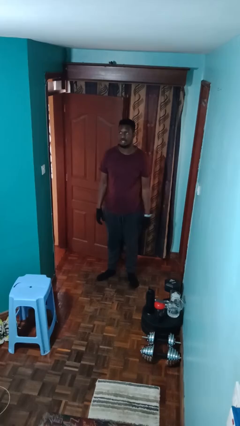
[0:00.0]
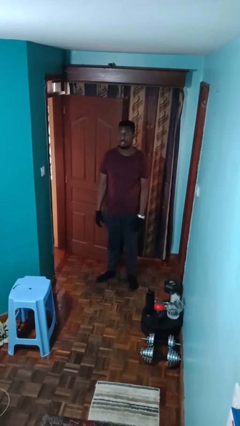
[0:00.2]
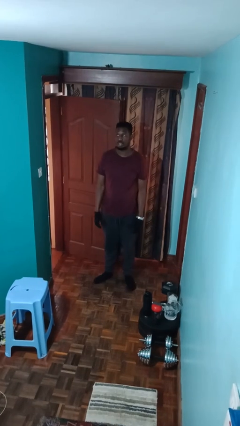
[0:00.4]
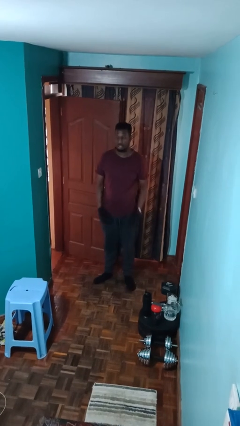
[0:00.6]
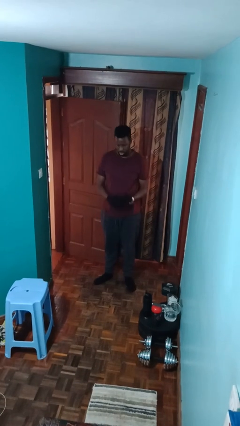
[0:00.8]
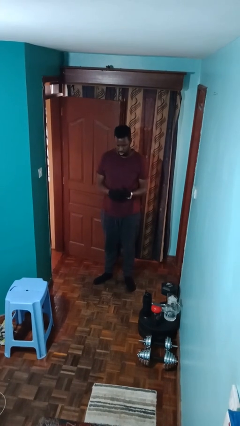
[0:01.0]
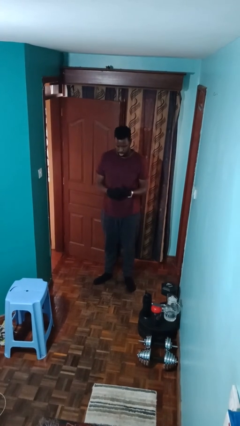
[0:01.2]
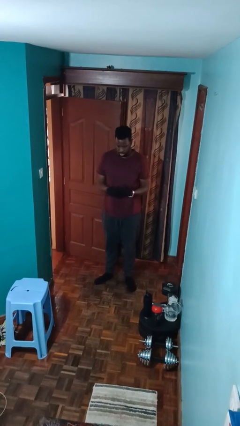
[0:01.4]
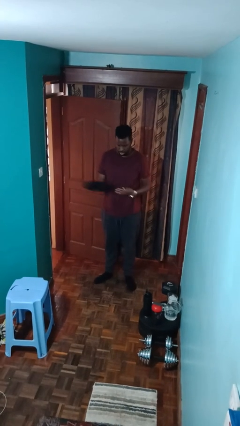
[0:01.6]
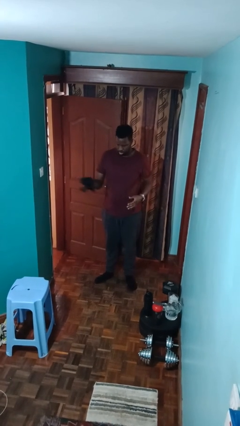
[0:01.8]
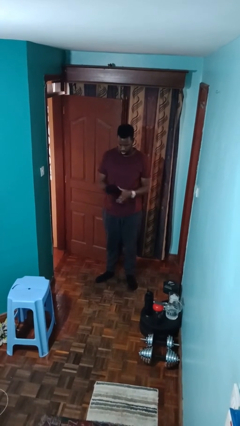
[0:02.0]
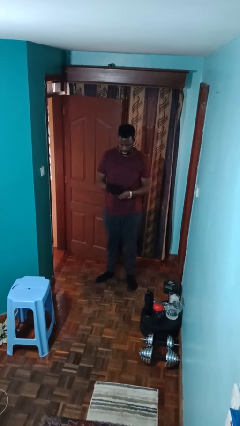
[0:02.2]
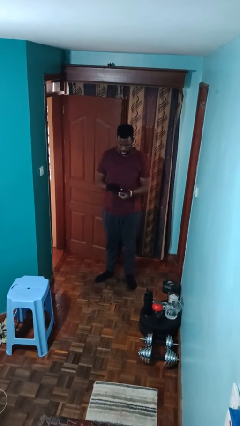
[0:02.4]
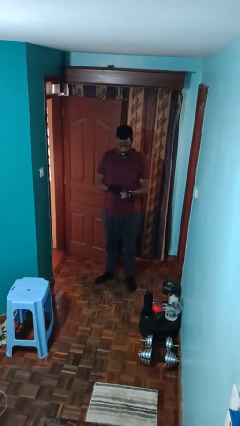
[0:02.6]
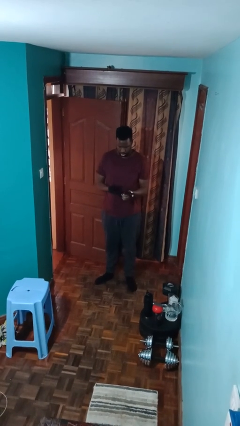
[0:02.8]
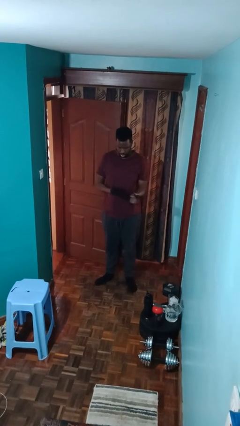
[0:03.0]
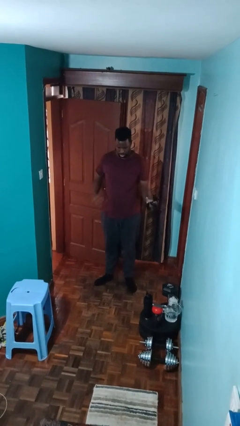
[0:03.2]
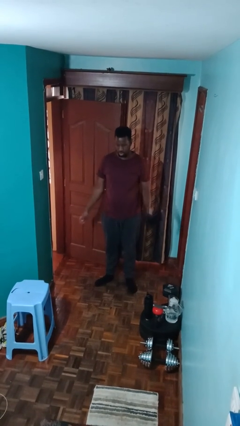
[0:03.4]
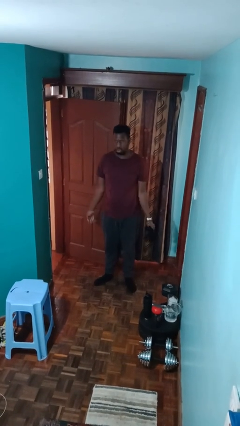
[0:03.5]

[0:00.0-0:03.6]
person takes off gloves

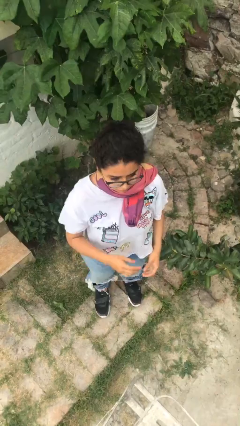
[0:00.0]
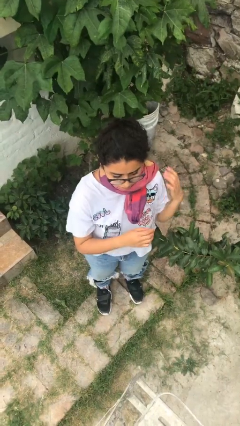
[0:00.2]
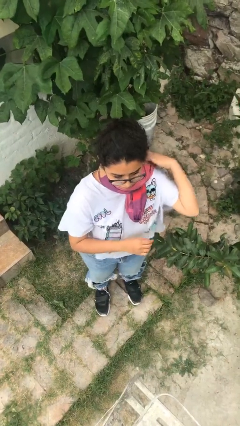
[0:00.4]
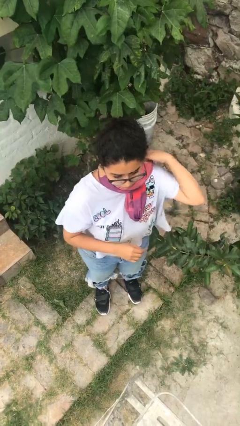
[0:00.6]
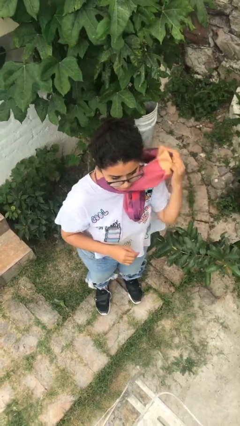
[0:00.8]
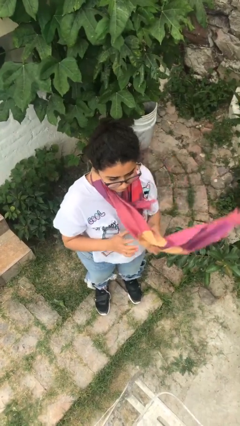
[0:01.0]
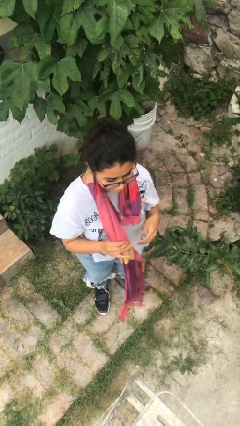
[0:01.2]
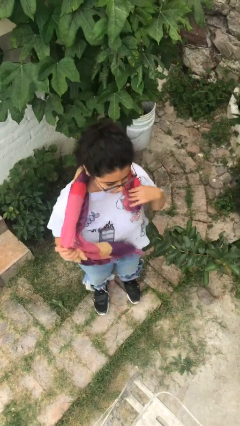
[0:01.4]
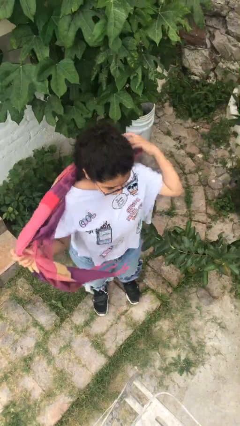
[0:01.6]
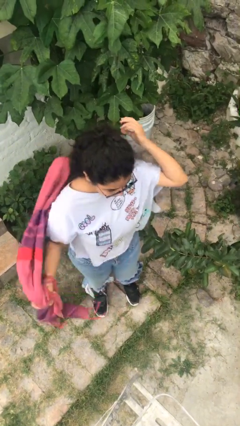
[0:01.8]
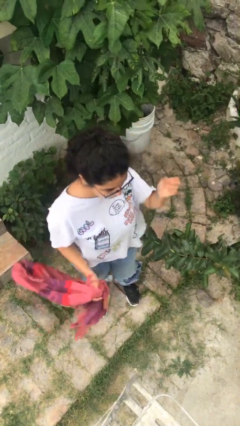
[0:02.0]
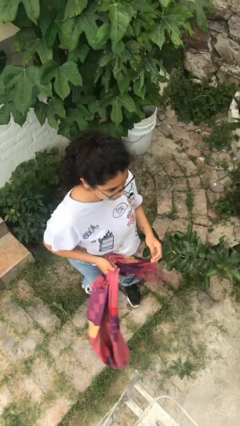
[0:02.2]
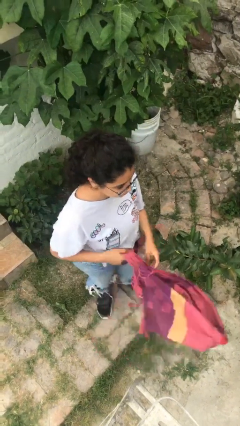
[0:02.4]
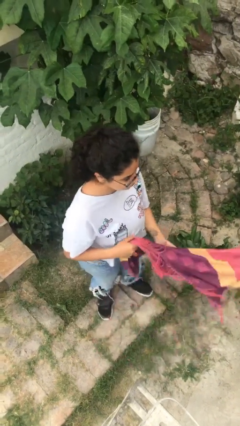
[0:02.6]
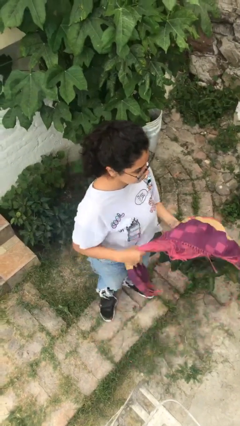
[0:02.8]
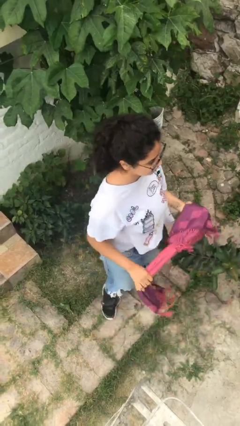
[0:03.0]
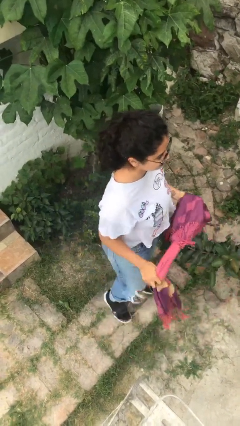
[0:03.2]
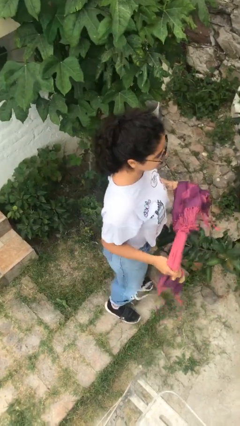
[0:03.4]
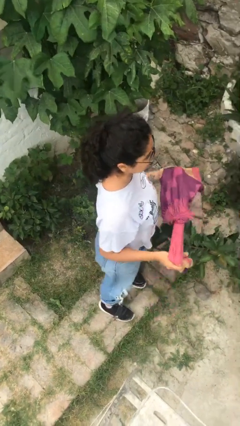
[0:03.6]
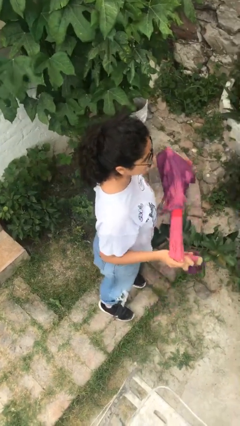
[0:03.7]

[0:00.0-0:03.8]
person takes off scarf

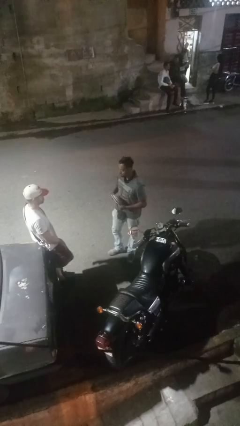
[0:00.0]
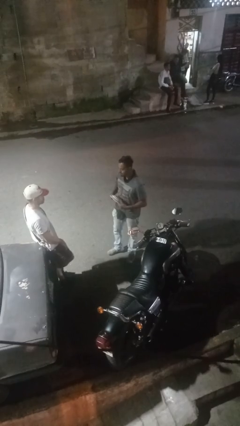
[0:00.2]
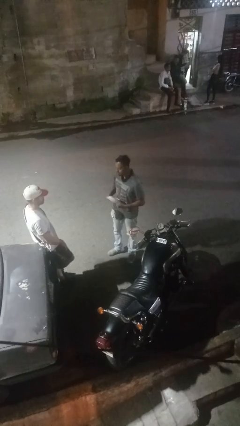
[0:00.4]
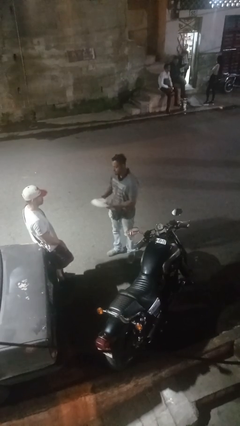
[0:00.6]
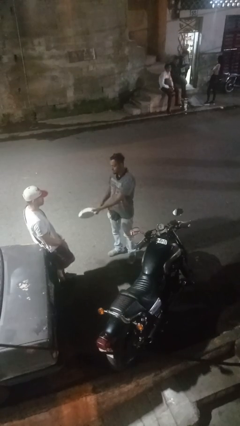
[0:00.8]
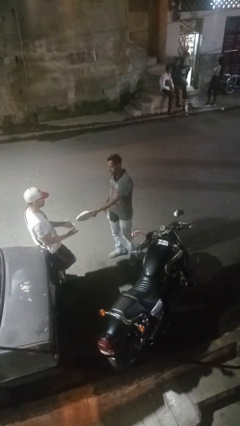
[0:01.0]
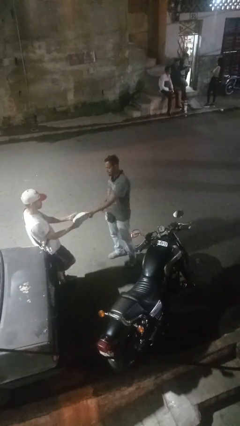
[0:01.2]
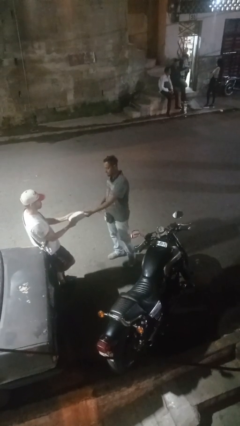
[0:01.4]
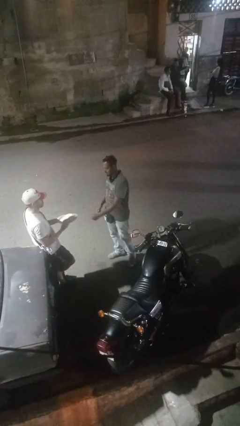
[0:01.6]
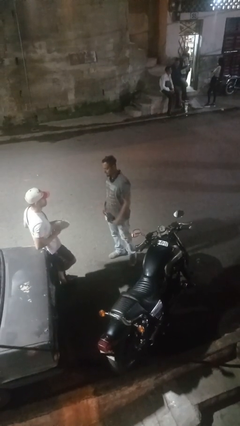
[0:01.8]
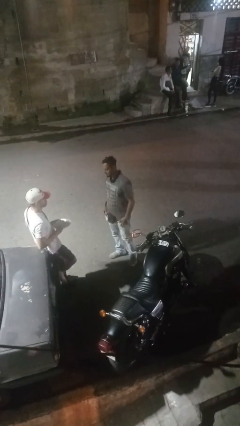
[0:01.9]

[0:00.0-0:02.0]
person transfers object to person

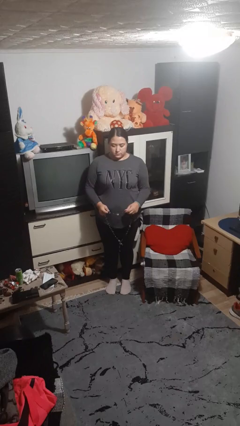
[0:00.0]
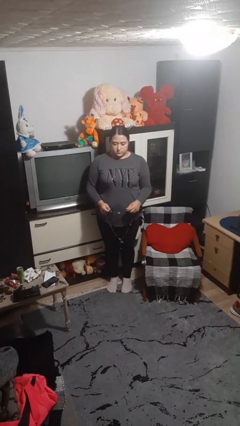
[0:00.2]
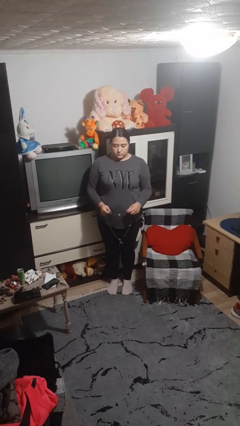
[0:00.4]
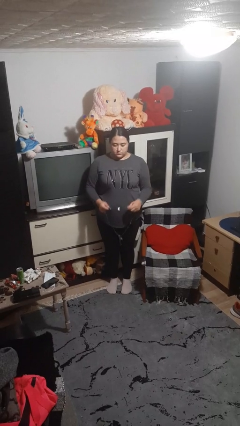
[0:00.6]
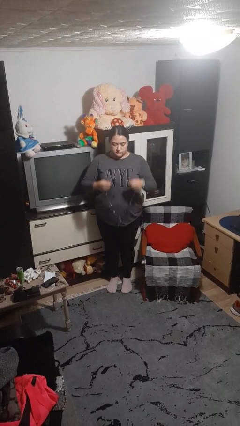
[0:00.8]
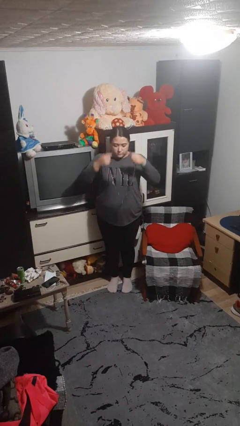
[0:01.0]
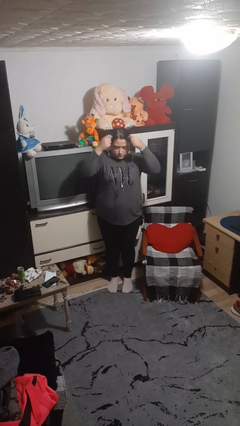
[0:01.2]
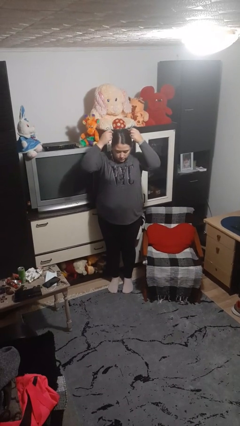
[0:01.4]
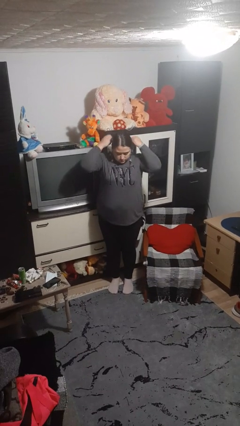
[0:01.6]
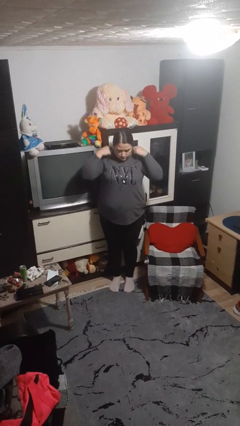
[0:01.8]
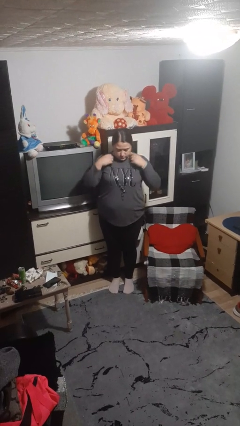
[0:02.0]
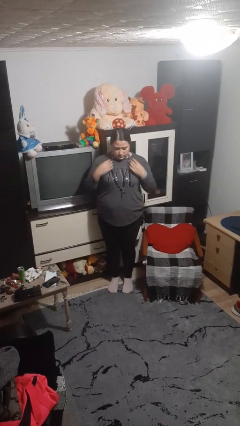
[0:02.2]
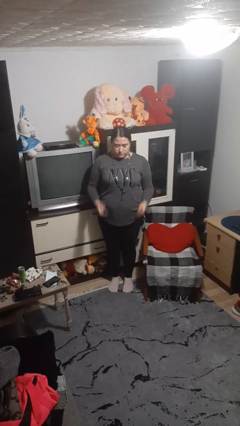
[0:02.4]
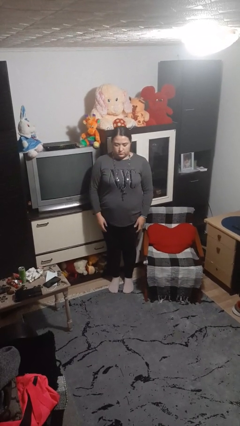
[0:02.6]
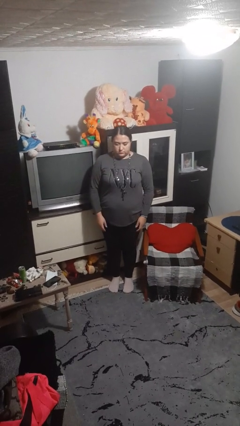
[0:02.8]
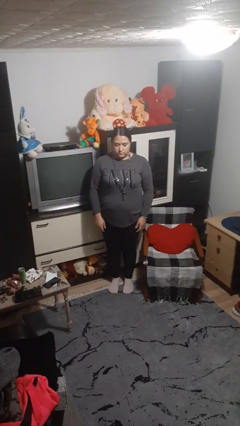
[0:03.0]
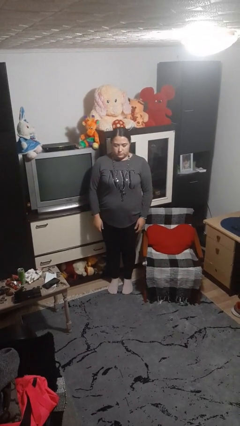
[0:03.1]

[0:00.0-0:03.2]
person puts on necklace

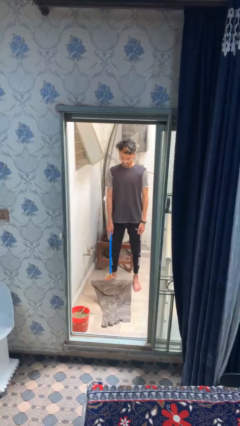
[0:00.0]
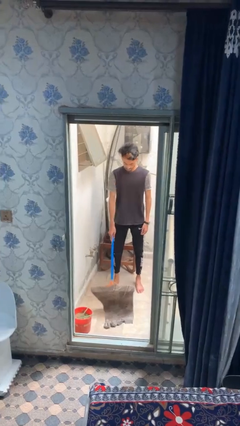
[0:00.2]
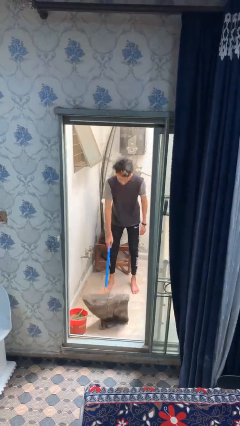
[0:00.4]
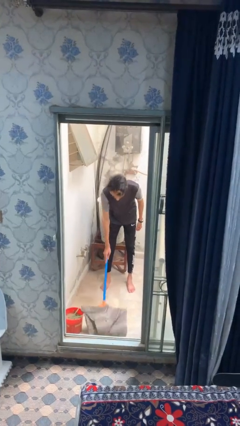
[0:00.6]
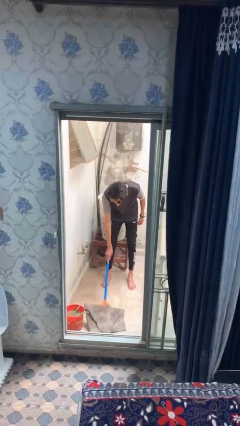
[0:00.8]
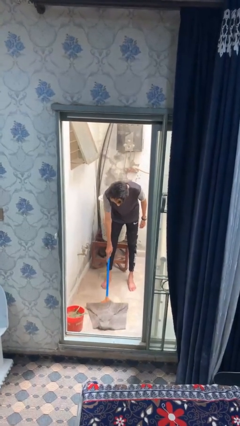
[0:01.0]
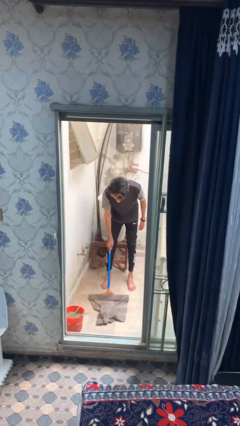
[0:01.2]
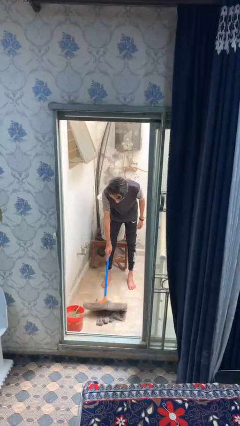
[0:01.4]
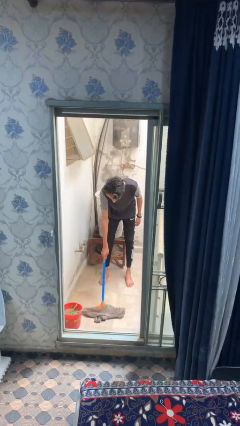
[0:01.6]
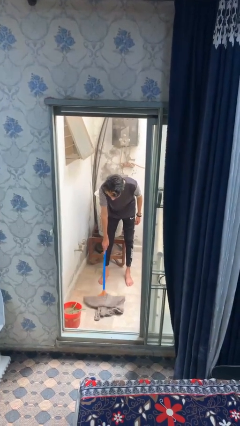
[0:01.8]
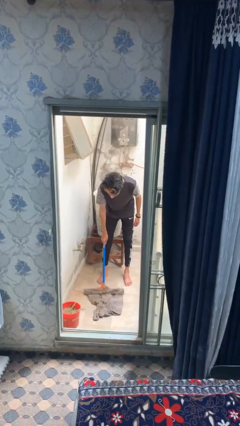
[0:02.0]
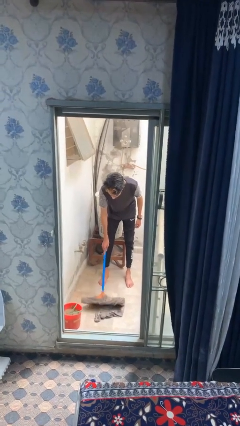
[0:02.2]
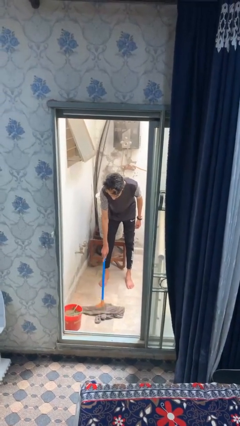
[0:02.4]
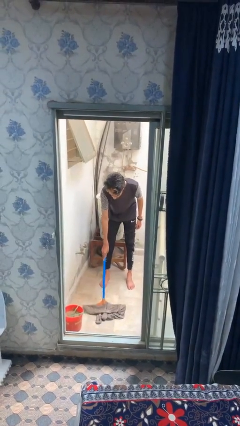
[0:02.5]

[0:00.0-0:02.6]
person mops

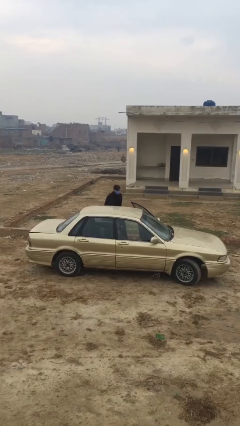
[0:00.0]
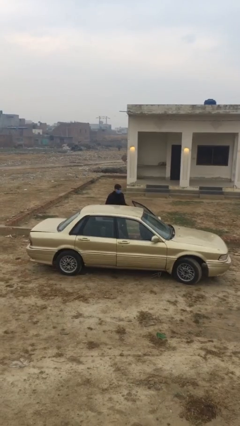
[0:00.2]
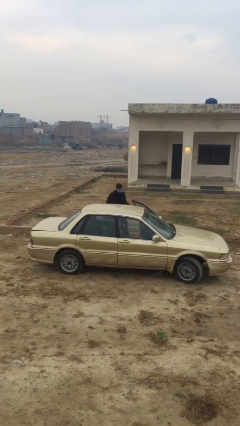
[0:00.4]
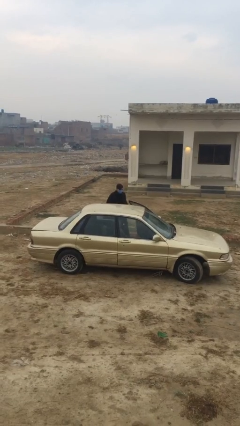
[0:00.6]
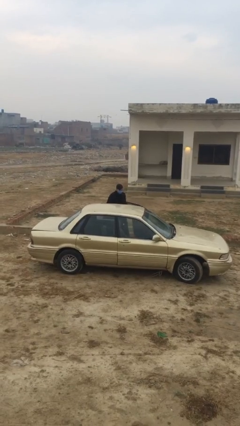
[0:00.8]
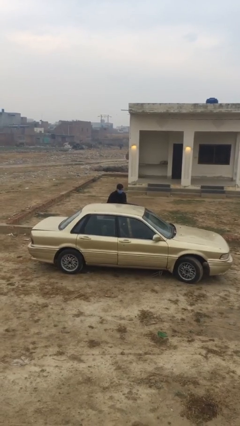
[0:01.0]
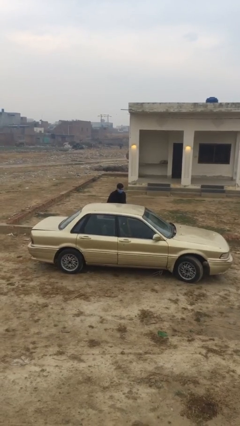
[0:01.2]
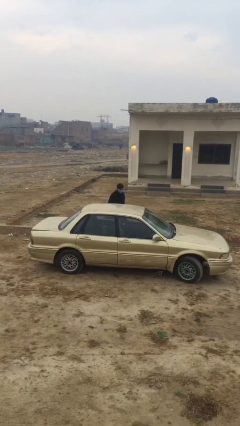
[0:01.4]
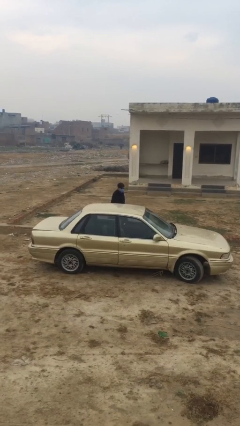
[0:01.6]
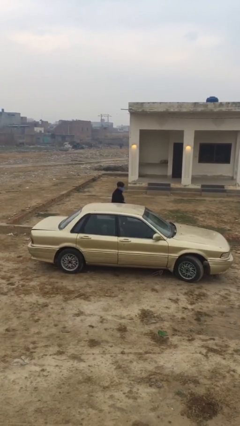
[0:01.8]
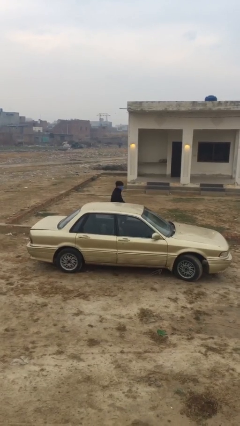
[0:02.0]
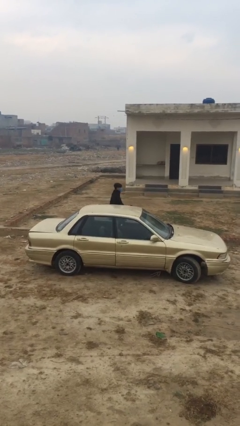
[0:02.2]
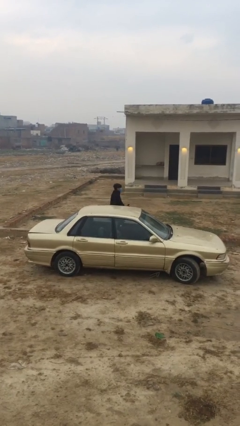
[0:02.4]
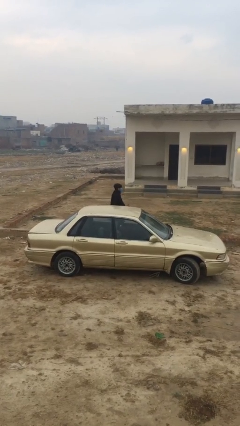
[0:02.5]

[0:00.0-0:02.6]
person closes car door
